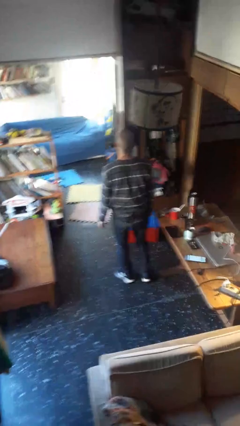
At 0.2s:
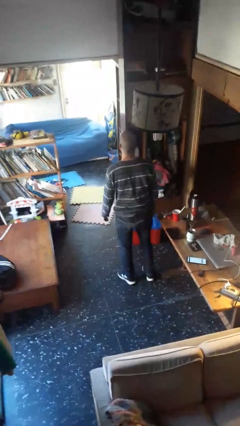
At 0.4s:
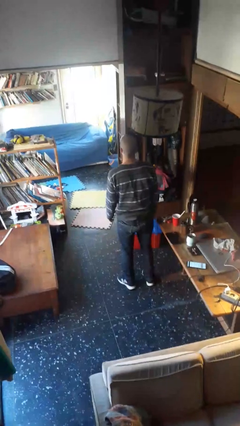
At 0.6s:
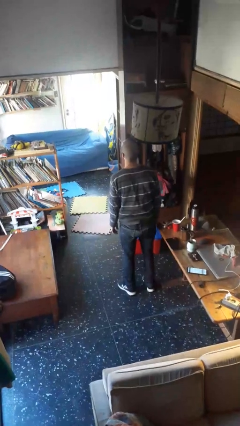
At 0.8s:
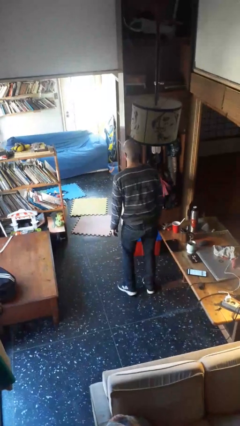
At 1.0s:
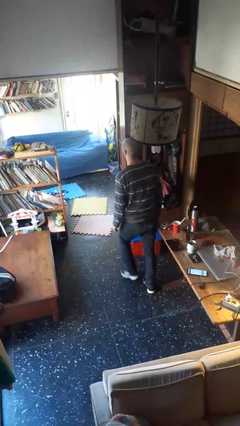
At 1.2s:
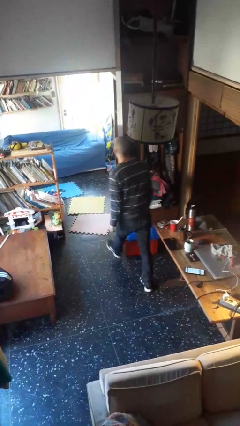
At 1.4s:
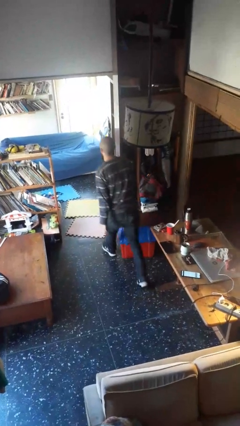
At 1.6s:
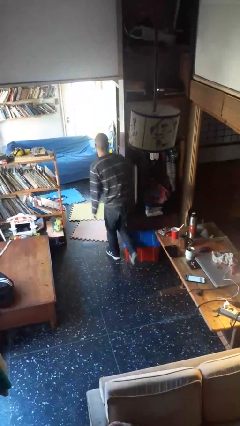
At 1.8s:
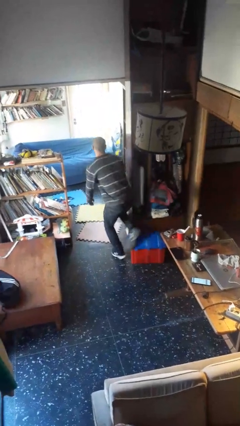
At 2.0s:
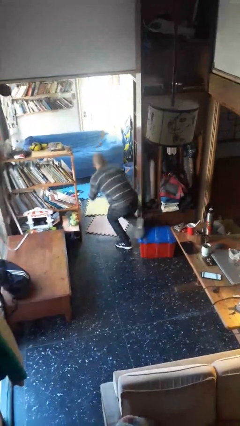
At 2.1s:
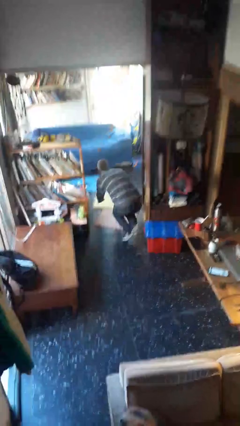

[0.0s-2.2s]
person trips on object on floor

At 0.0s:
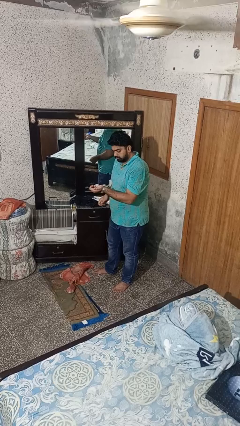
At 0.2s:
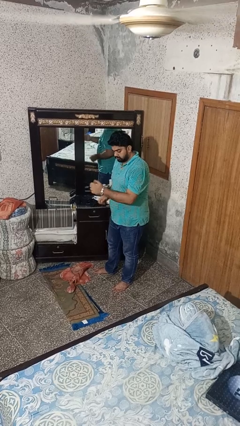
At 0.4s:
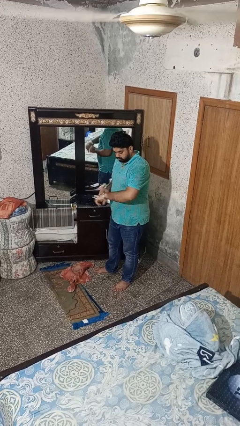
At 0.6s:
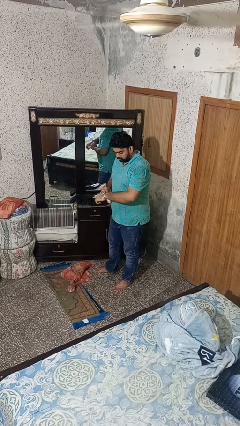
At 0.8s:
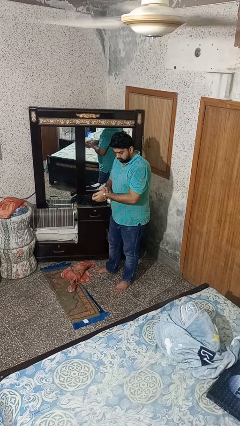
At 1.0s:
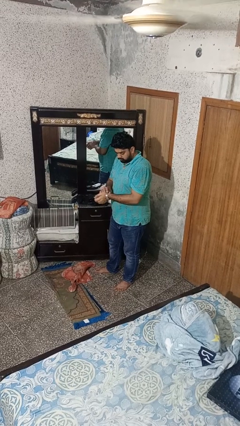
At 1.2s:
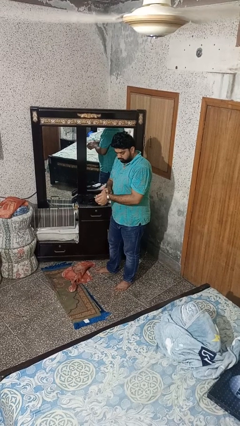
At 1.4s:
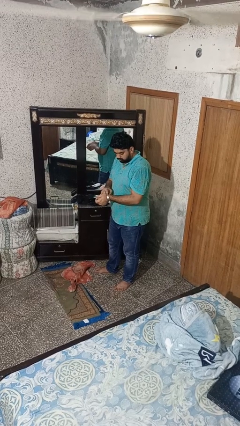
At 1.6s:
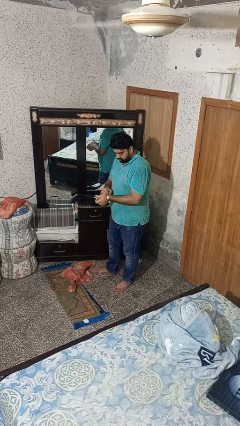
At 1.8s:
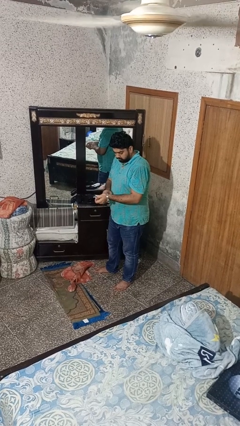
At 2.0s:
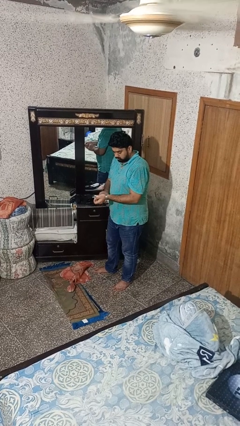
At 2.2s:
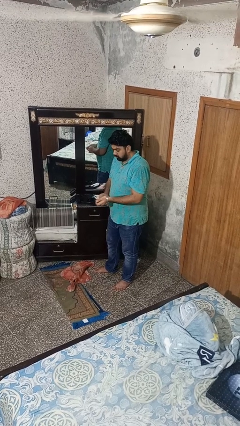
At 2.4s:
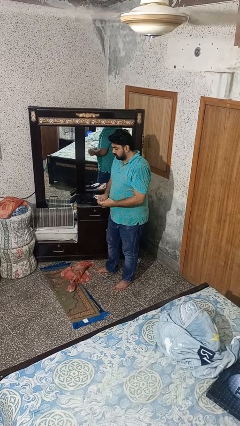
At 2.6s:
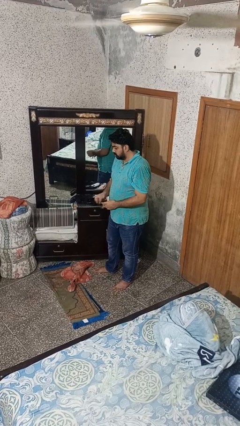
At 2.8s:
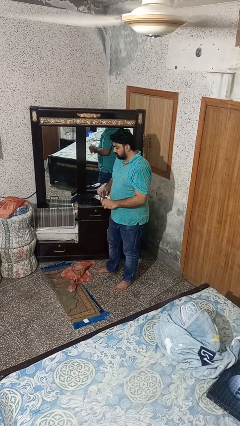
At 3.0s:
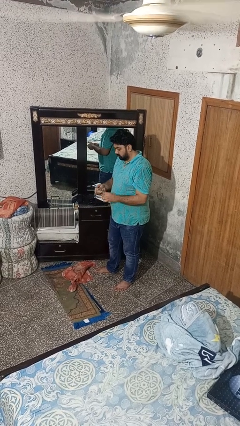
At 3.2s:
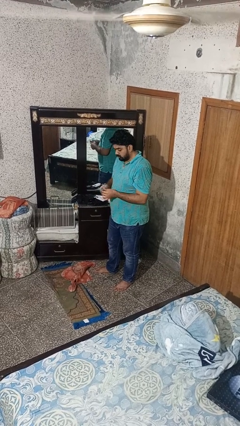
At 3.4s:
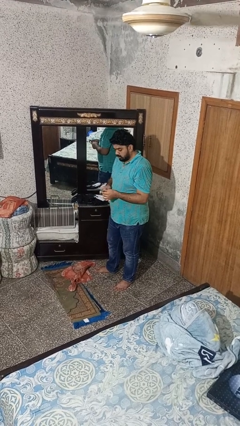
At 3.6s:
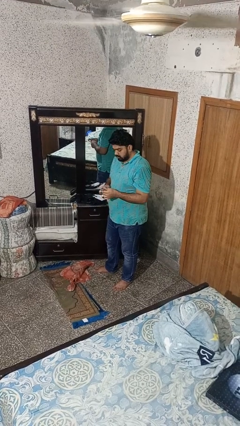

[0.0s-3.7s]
person takes off wristwatch

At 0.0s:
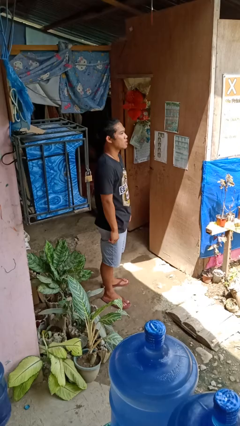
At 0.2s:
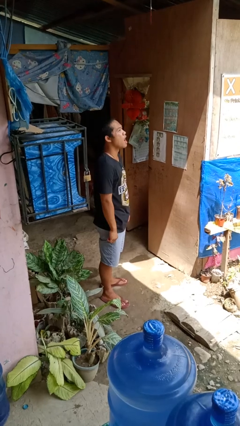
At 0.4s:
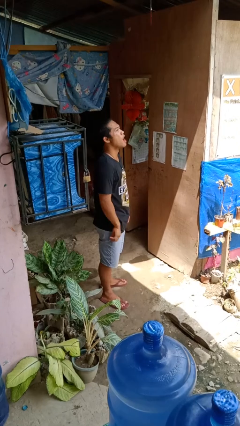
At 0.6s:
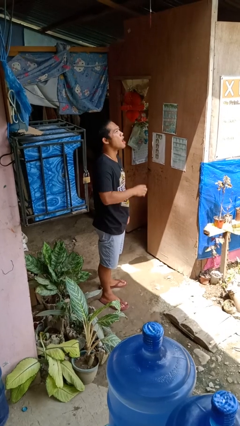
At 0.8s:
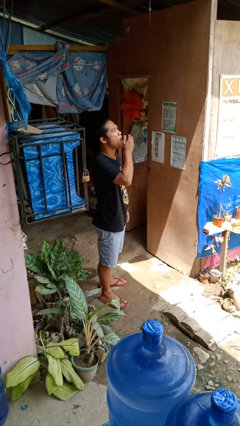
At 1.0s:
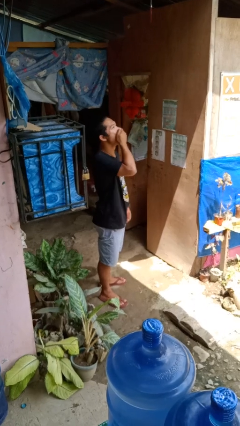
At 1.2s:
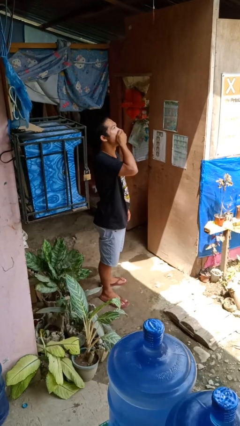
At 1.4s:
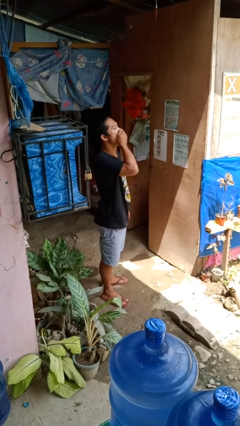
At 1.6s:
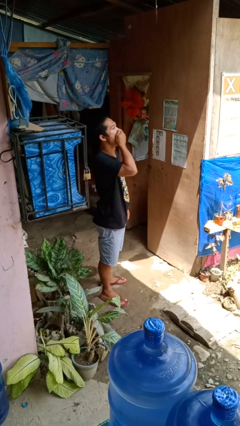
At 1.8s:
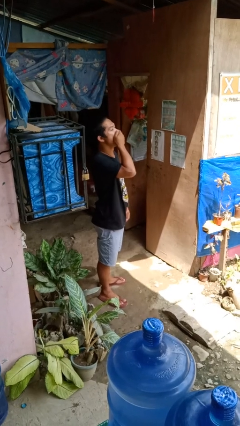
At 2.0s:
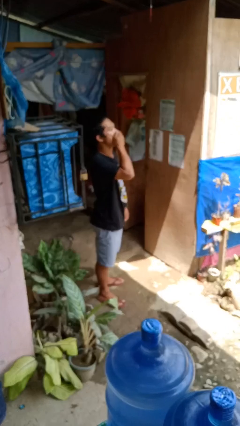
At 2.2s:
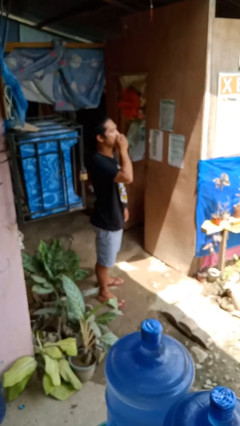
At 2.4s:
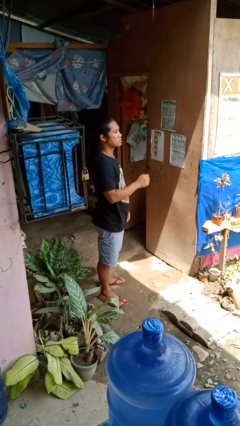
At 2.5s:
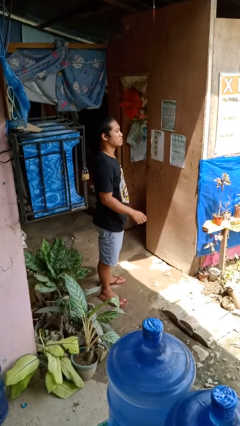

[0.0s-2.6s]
person yawns

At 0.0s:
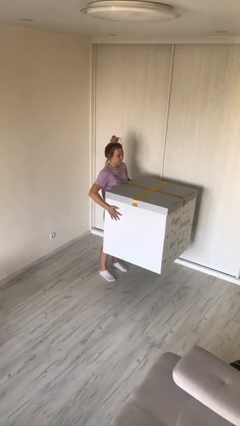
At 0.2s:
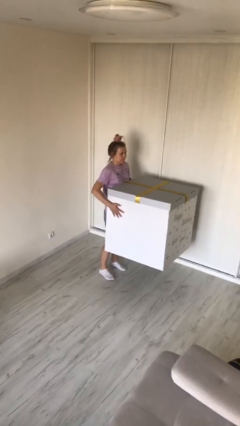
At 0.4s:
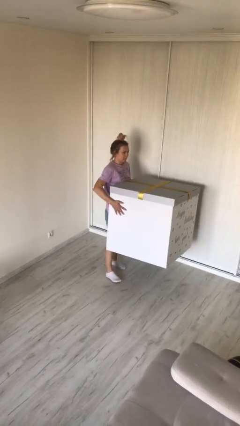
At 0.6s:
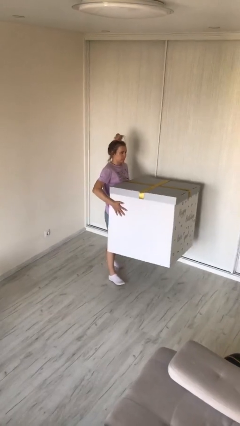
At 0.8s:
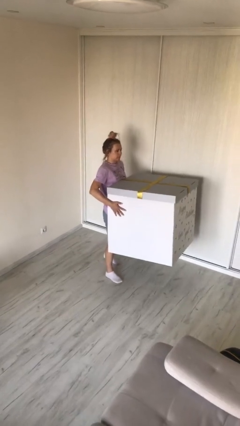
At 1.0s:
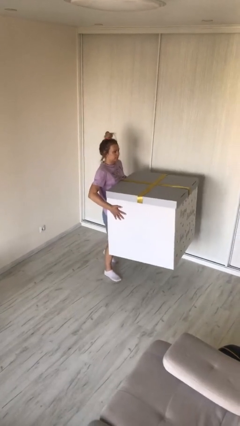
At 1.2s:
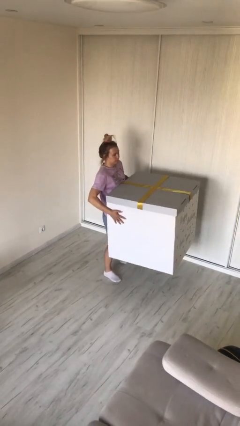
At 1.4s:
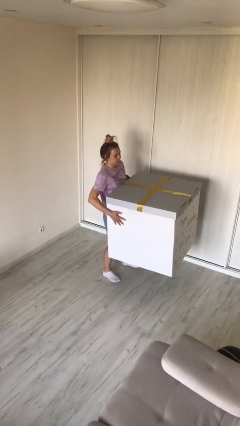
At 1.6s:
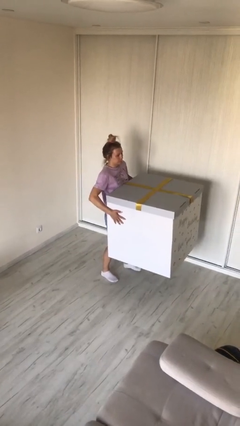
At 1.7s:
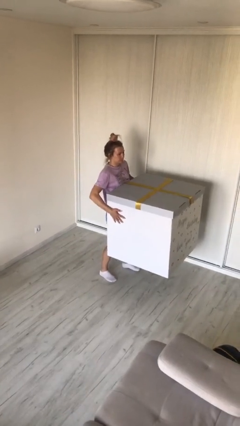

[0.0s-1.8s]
person carries furniture

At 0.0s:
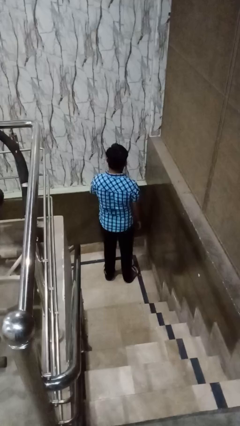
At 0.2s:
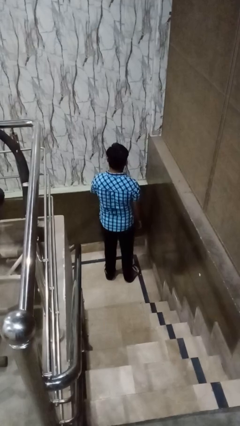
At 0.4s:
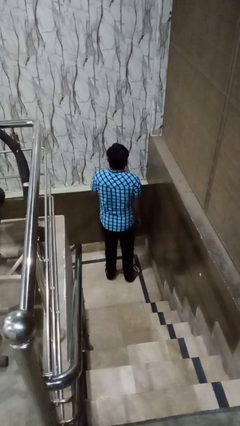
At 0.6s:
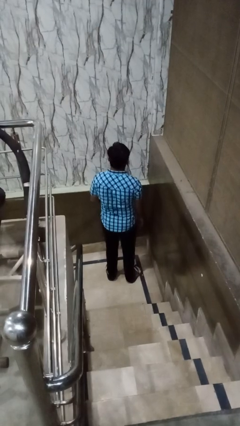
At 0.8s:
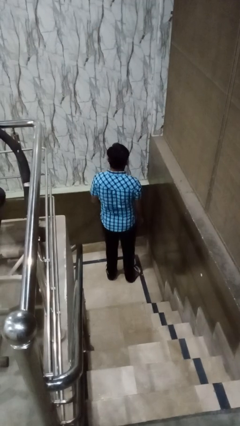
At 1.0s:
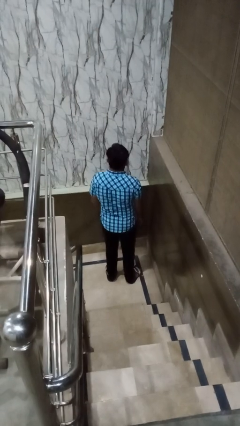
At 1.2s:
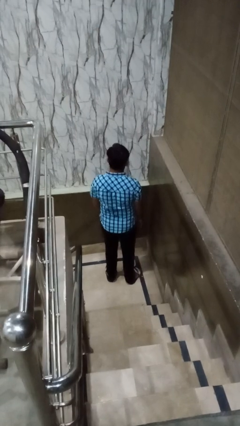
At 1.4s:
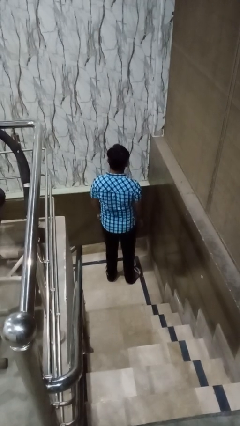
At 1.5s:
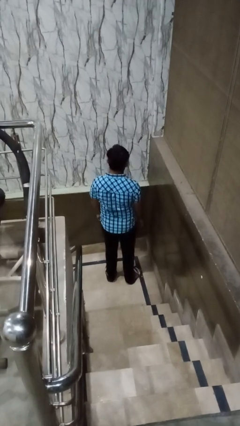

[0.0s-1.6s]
person shrugs

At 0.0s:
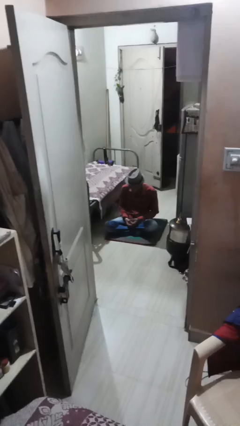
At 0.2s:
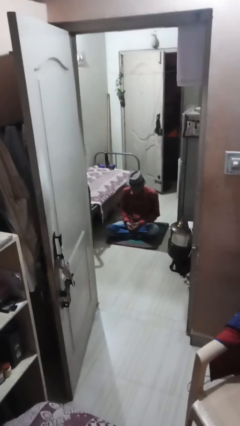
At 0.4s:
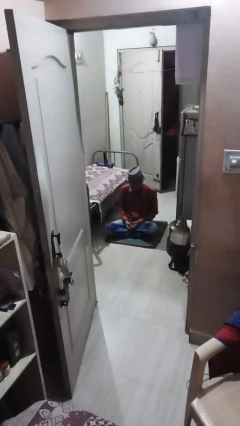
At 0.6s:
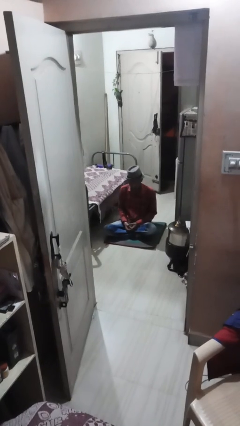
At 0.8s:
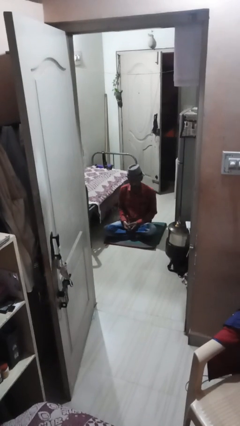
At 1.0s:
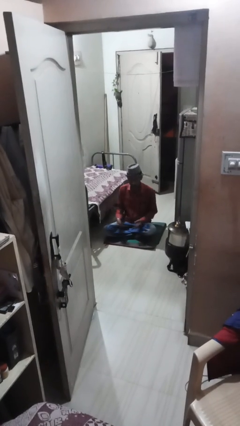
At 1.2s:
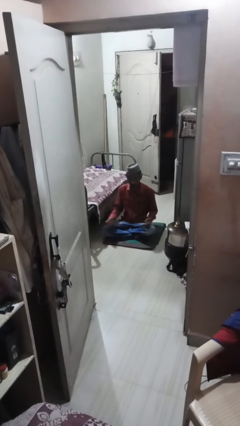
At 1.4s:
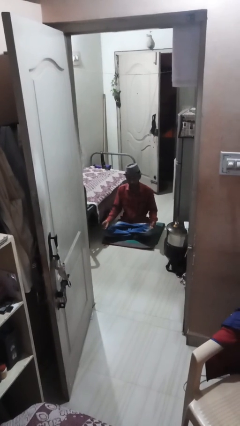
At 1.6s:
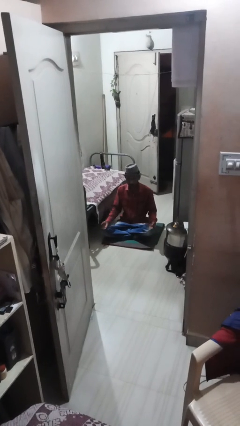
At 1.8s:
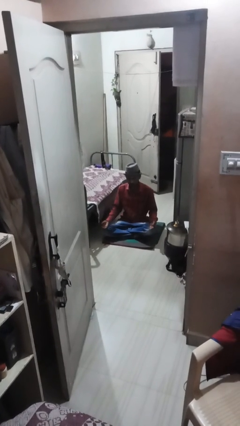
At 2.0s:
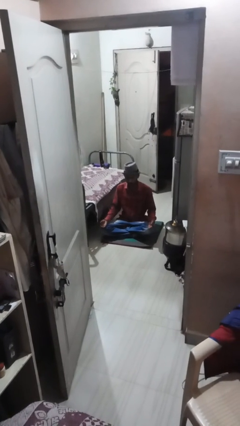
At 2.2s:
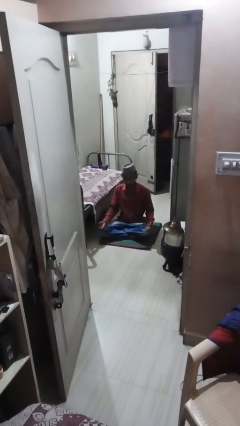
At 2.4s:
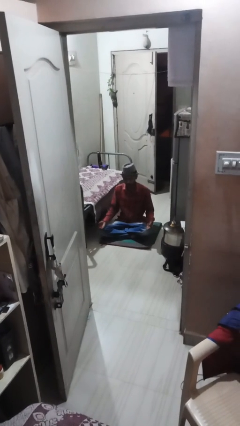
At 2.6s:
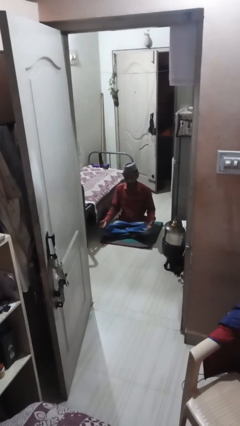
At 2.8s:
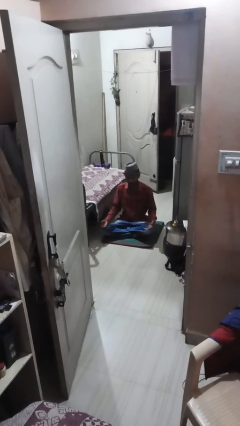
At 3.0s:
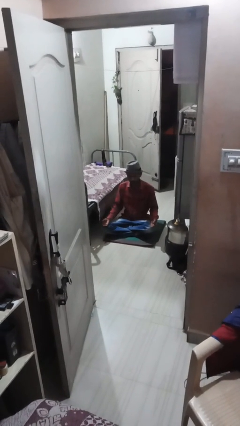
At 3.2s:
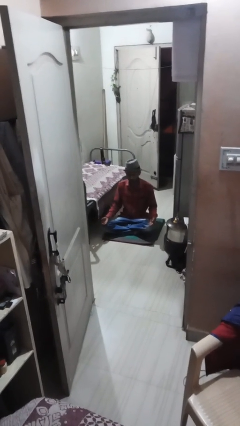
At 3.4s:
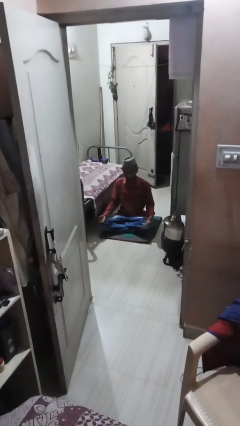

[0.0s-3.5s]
person prays

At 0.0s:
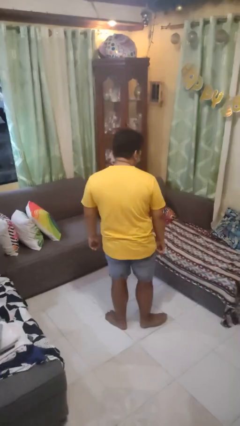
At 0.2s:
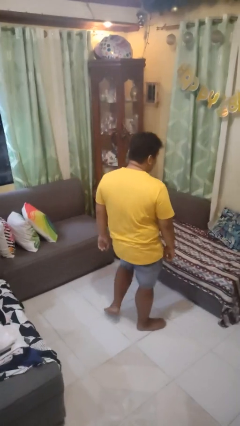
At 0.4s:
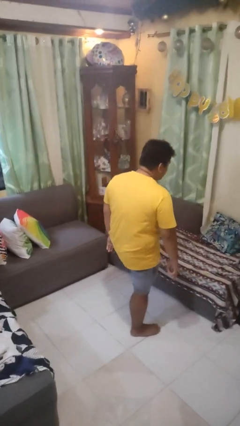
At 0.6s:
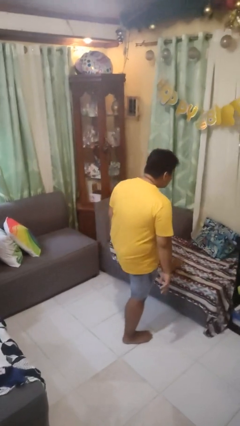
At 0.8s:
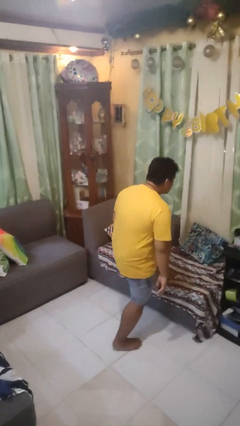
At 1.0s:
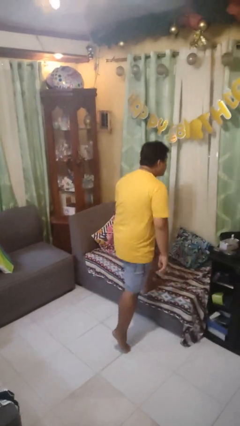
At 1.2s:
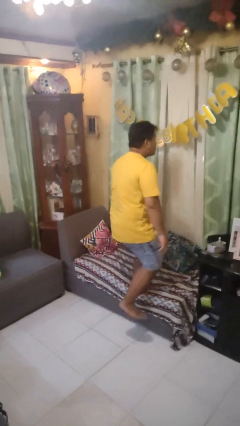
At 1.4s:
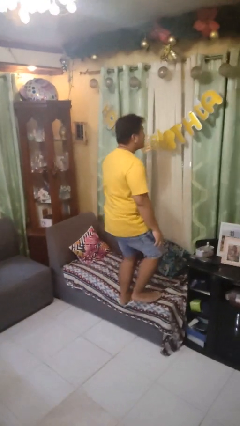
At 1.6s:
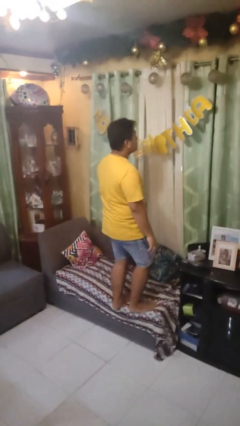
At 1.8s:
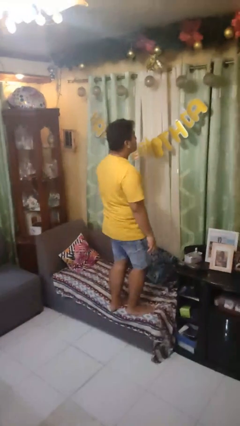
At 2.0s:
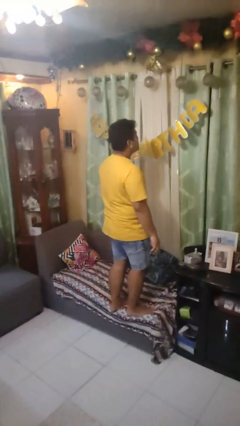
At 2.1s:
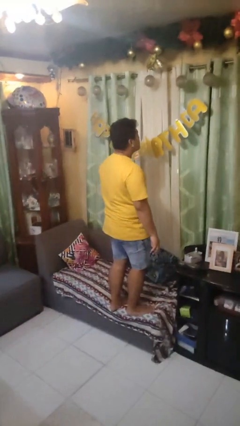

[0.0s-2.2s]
person climbs on couch
